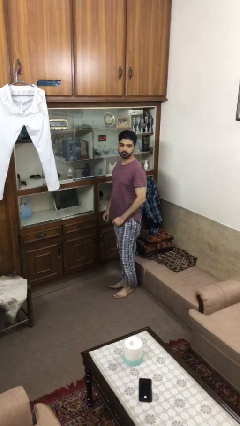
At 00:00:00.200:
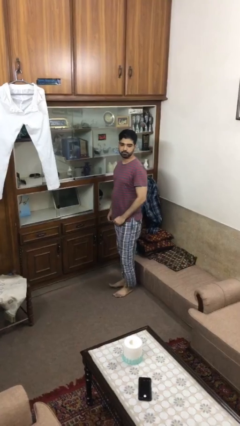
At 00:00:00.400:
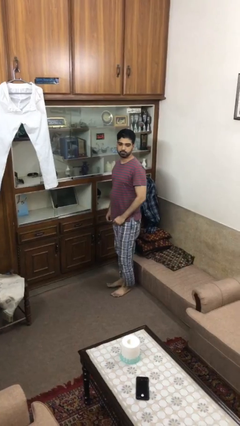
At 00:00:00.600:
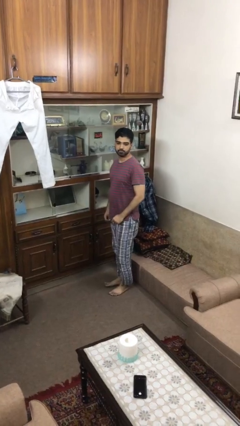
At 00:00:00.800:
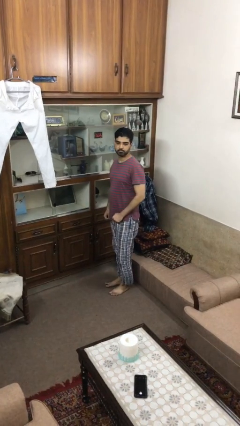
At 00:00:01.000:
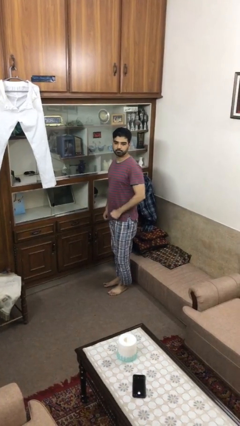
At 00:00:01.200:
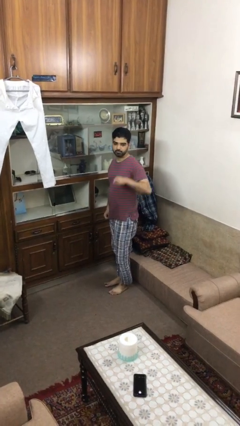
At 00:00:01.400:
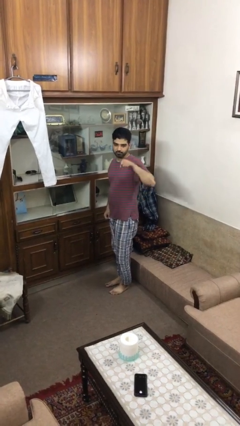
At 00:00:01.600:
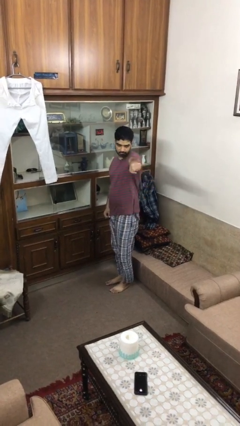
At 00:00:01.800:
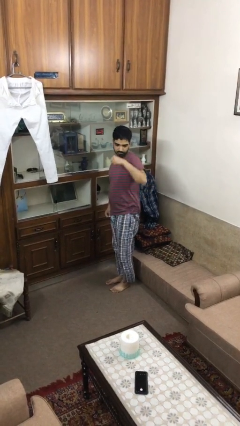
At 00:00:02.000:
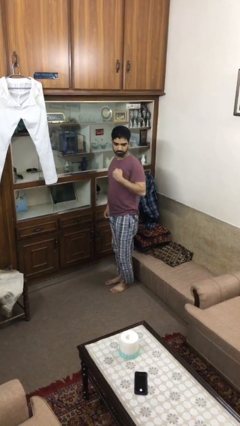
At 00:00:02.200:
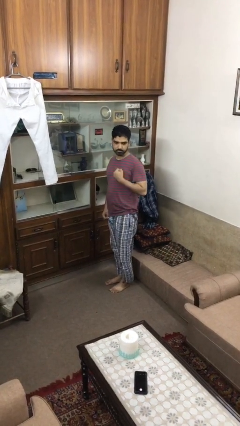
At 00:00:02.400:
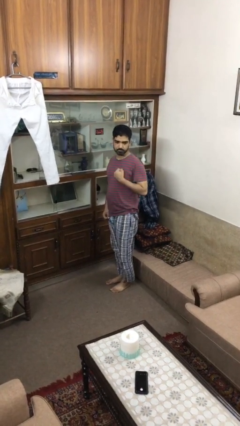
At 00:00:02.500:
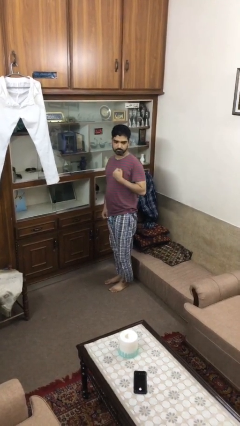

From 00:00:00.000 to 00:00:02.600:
person karate chop

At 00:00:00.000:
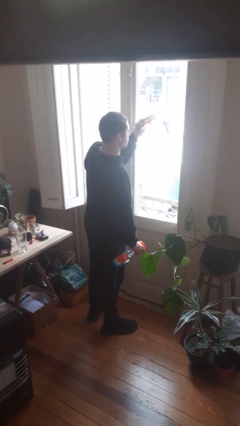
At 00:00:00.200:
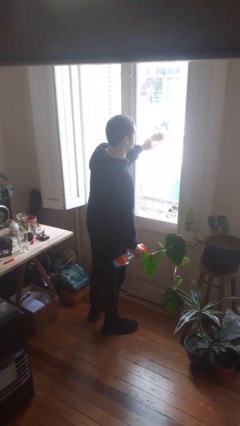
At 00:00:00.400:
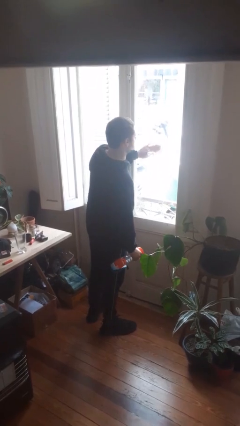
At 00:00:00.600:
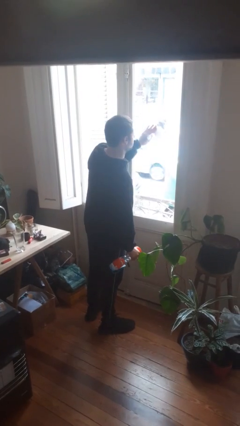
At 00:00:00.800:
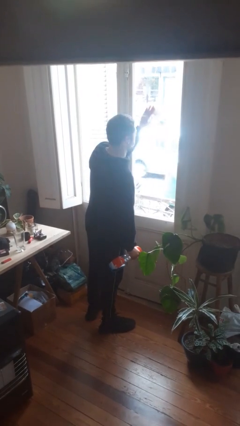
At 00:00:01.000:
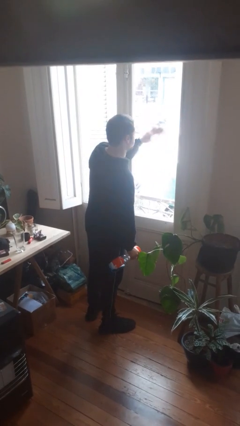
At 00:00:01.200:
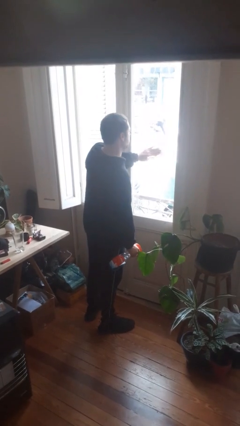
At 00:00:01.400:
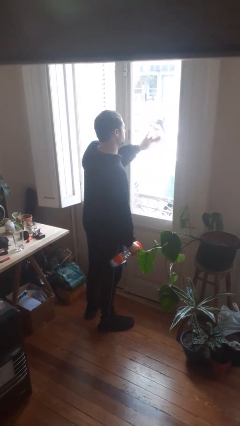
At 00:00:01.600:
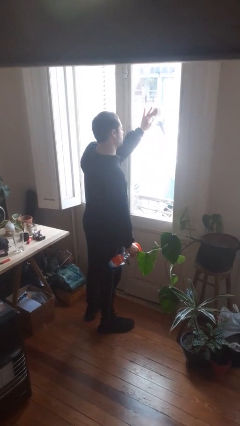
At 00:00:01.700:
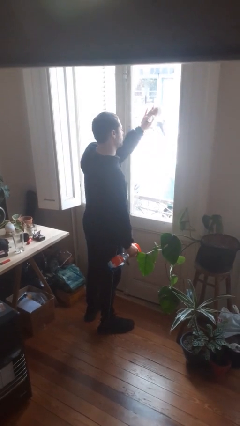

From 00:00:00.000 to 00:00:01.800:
person washes window

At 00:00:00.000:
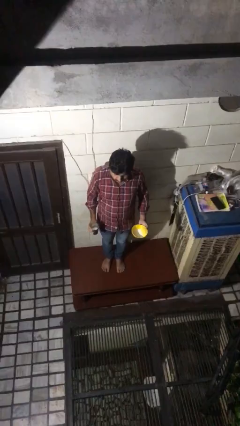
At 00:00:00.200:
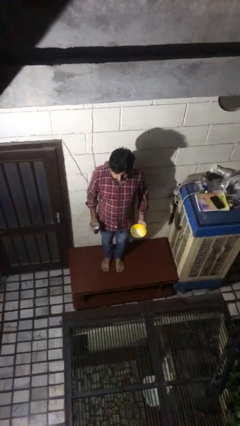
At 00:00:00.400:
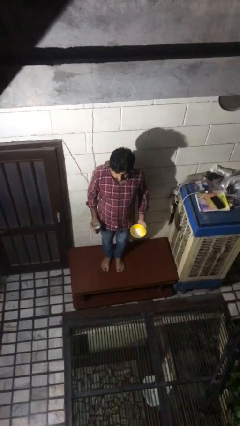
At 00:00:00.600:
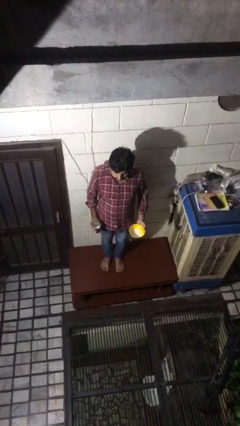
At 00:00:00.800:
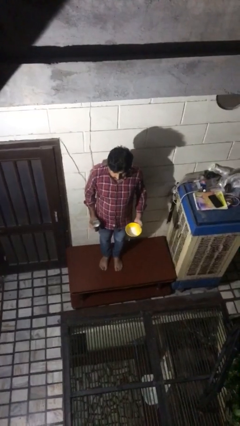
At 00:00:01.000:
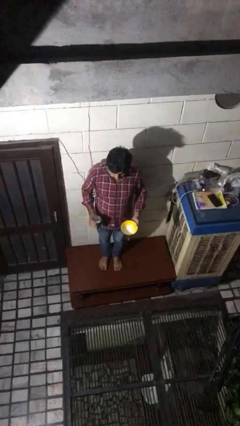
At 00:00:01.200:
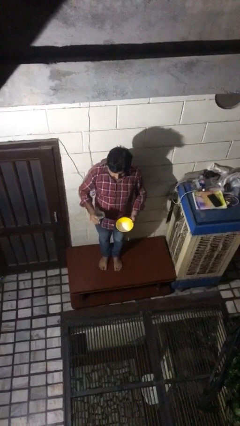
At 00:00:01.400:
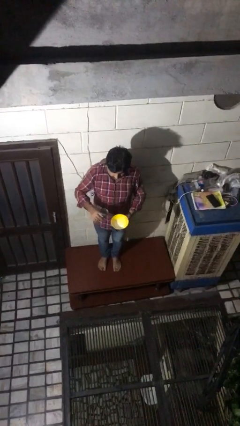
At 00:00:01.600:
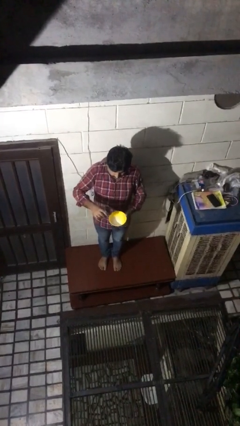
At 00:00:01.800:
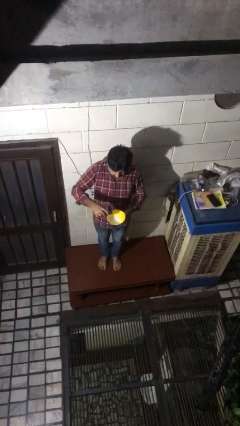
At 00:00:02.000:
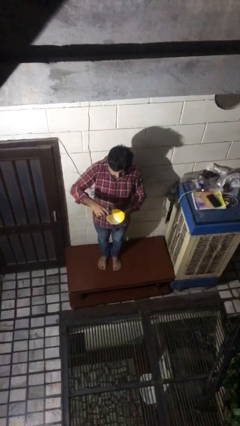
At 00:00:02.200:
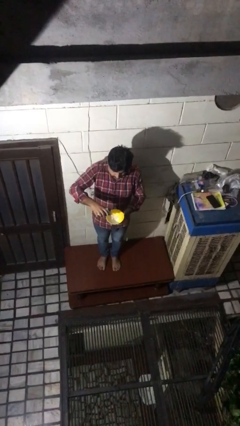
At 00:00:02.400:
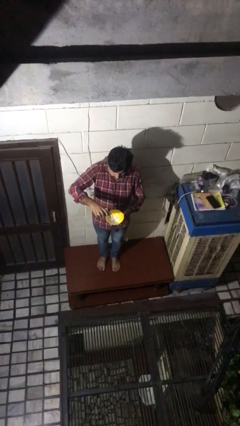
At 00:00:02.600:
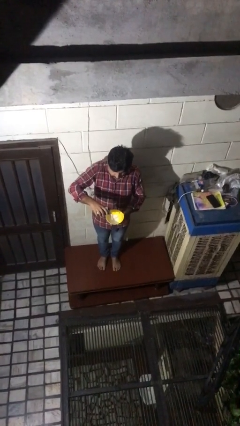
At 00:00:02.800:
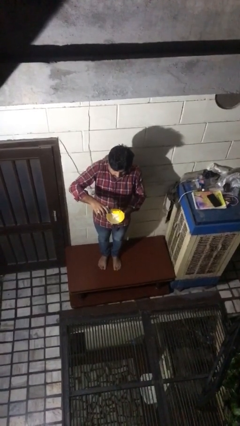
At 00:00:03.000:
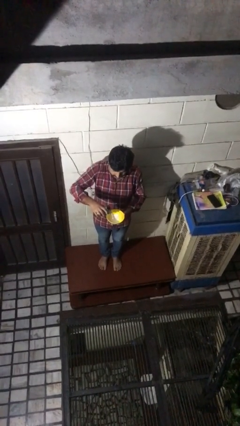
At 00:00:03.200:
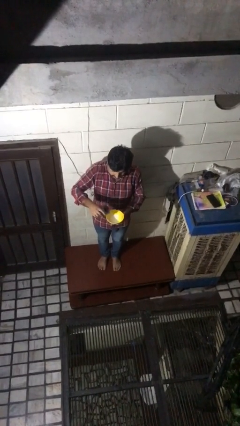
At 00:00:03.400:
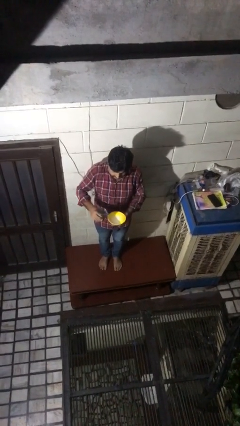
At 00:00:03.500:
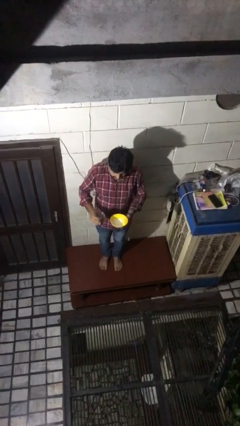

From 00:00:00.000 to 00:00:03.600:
person pours into bowl

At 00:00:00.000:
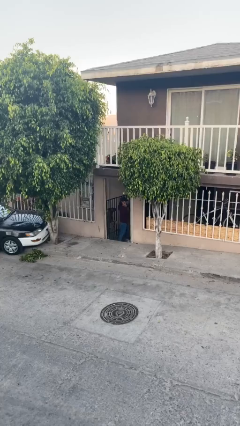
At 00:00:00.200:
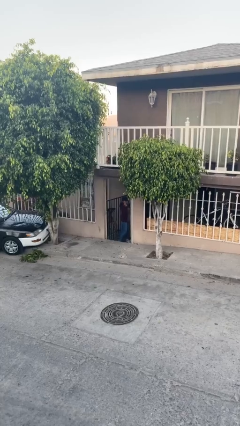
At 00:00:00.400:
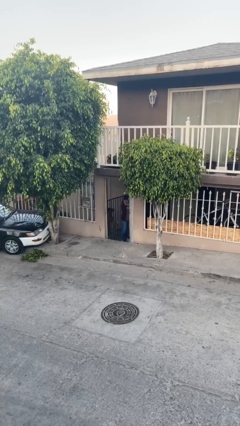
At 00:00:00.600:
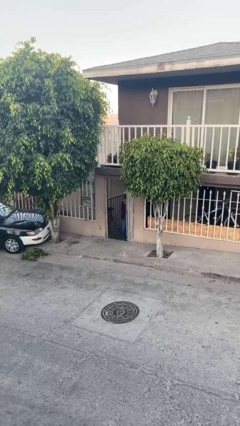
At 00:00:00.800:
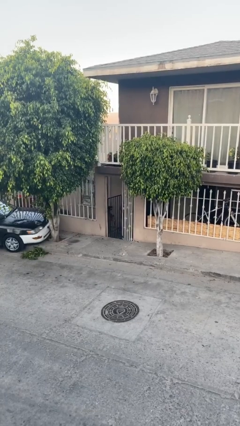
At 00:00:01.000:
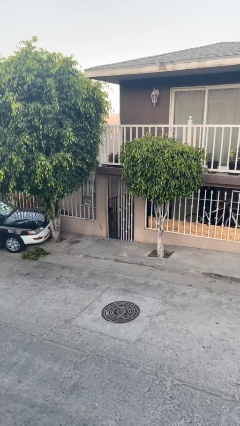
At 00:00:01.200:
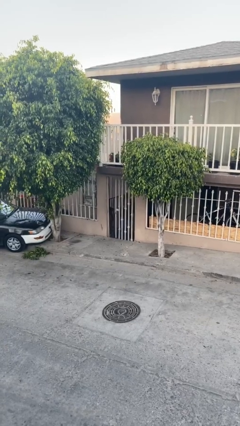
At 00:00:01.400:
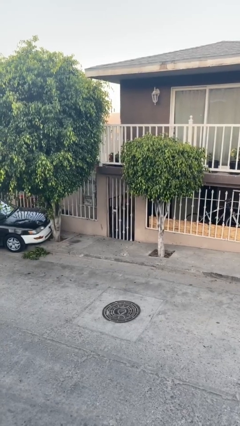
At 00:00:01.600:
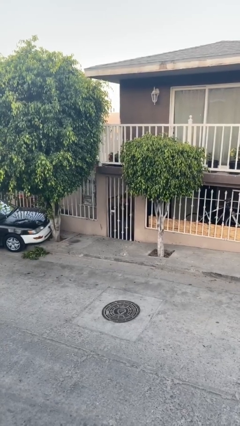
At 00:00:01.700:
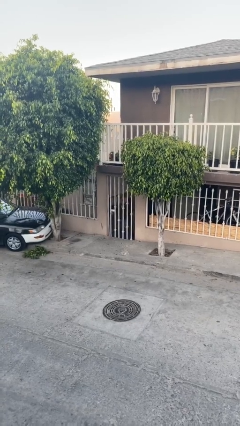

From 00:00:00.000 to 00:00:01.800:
person closes facility door

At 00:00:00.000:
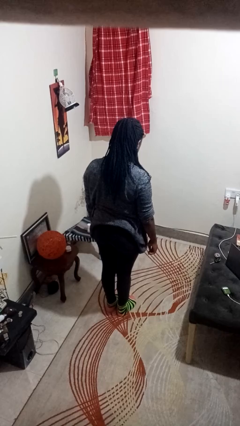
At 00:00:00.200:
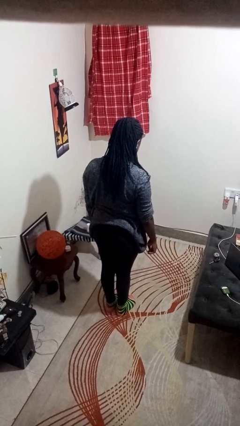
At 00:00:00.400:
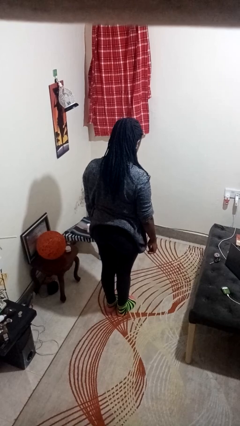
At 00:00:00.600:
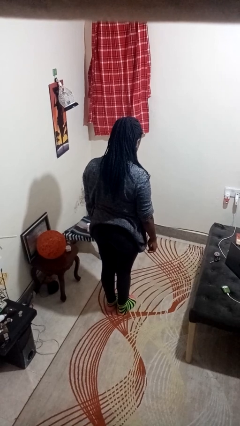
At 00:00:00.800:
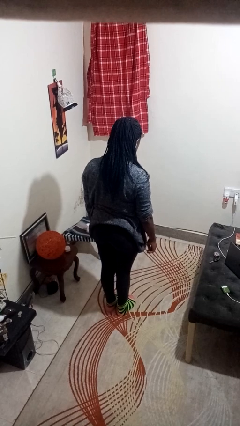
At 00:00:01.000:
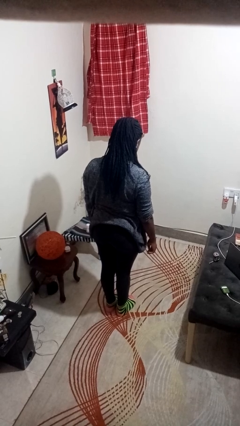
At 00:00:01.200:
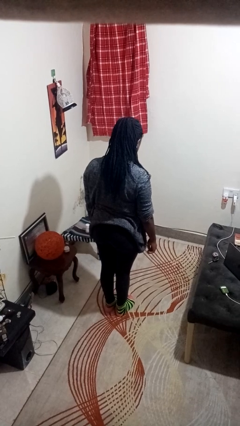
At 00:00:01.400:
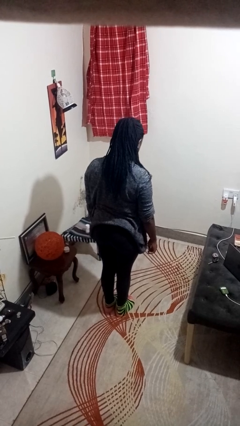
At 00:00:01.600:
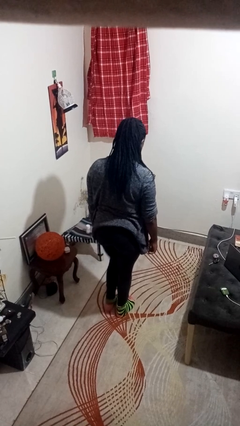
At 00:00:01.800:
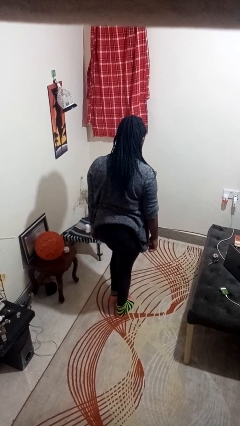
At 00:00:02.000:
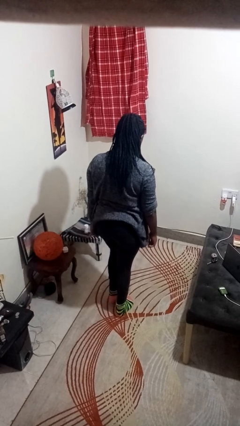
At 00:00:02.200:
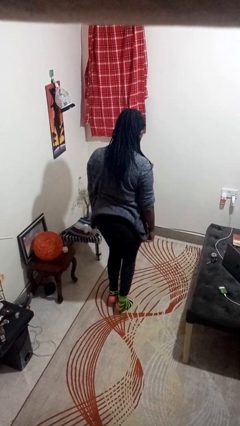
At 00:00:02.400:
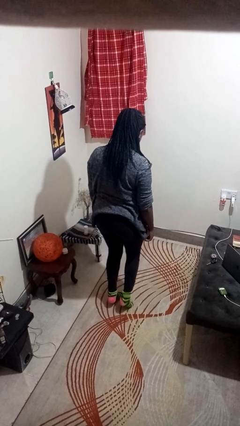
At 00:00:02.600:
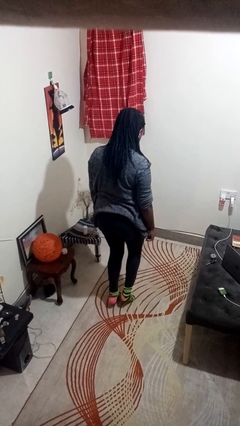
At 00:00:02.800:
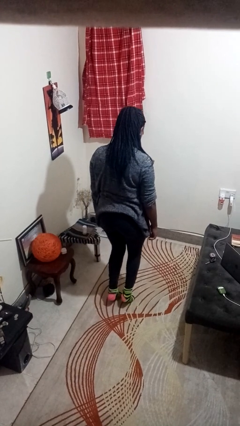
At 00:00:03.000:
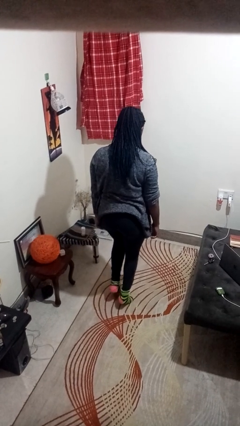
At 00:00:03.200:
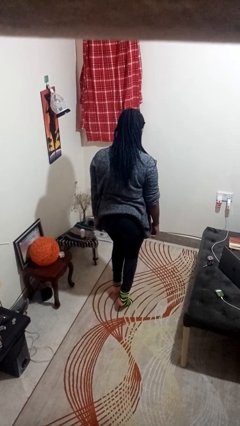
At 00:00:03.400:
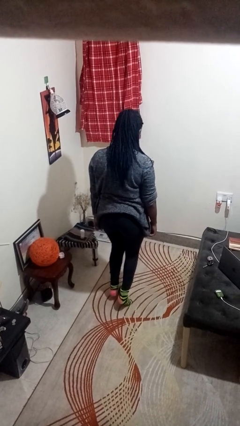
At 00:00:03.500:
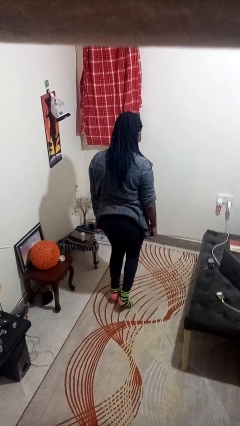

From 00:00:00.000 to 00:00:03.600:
person walks tiptoe

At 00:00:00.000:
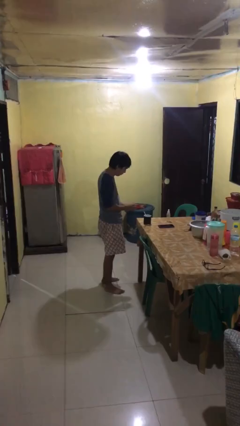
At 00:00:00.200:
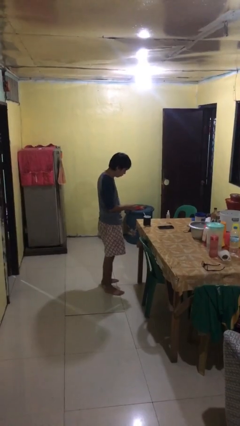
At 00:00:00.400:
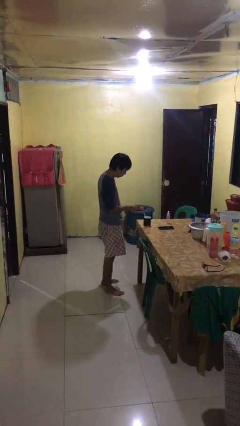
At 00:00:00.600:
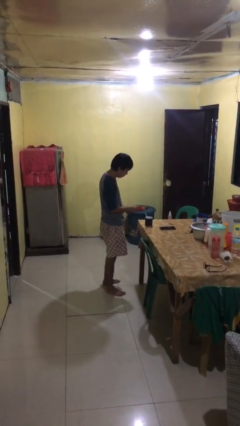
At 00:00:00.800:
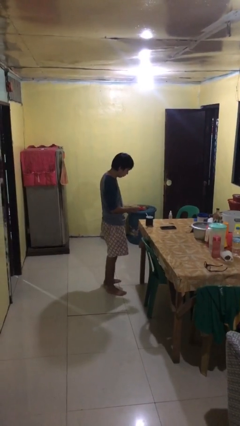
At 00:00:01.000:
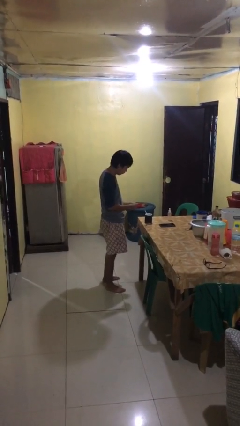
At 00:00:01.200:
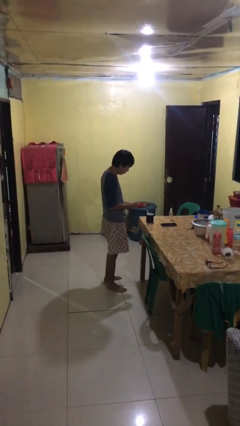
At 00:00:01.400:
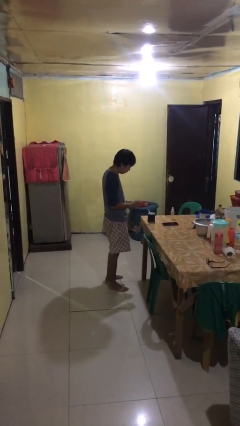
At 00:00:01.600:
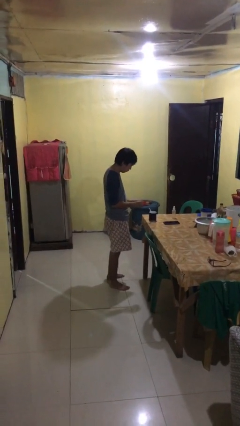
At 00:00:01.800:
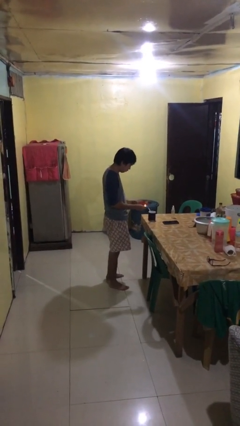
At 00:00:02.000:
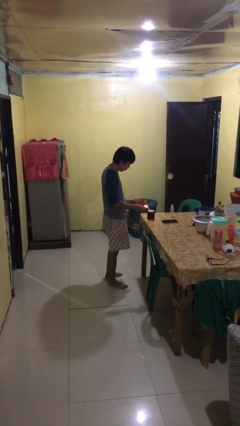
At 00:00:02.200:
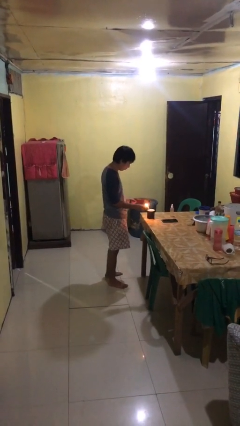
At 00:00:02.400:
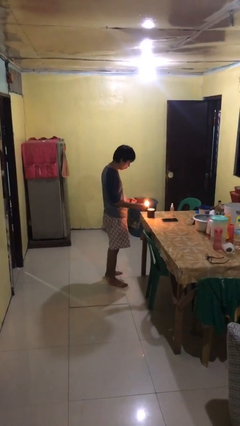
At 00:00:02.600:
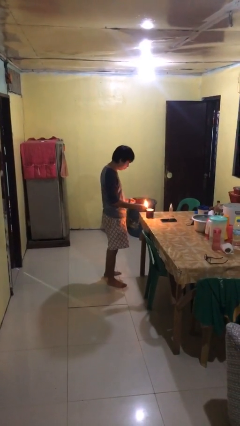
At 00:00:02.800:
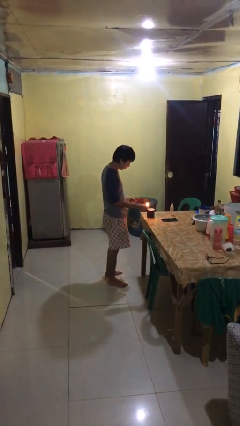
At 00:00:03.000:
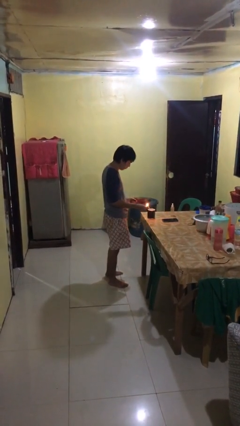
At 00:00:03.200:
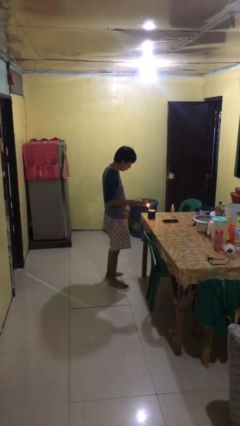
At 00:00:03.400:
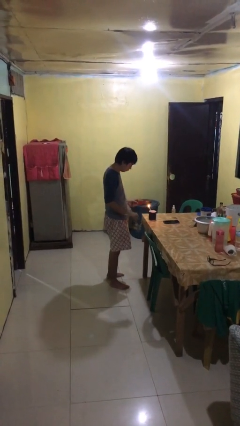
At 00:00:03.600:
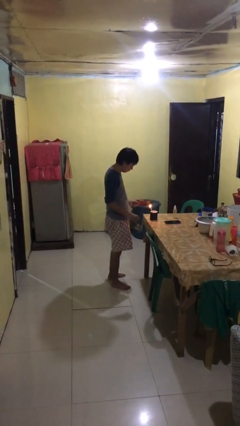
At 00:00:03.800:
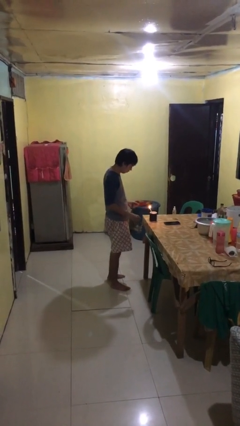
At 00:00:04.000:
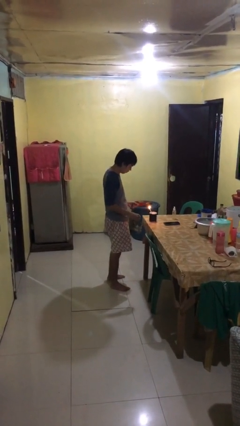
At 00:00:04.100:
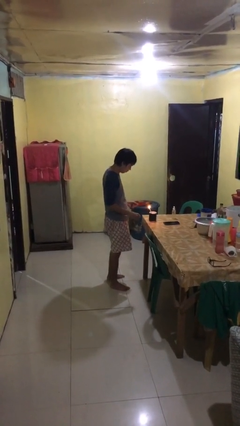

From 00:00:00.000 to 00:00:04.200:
person lights candle
